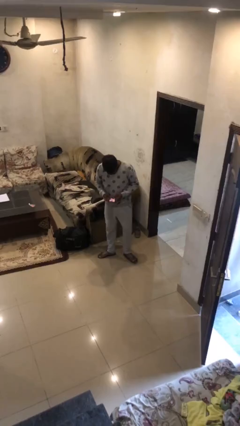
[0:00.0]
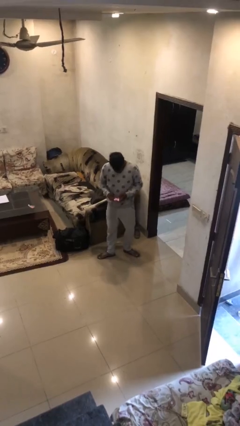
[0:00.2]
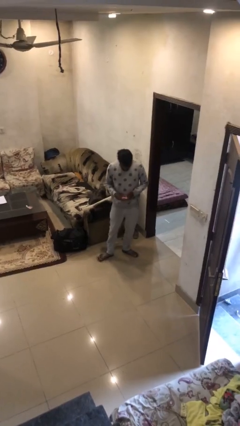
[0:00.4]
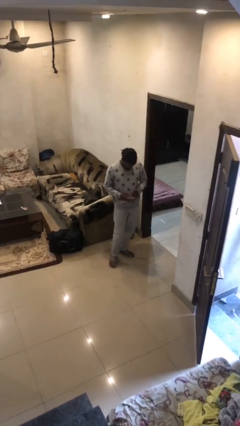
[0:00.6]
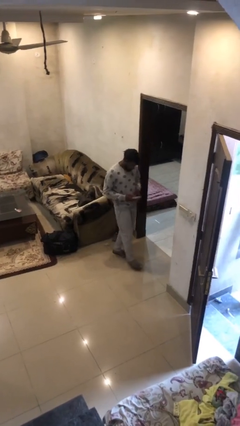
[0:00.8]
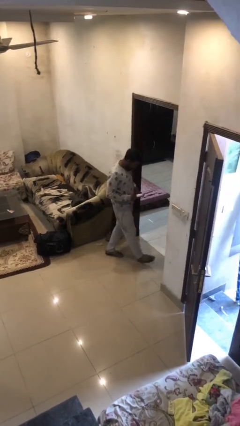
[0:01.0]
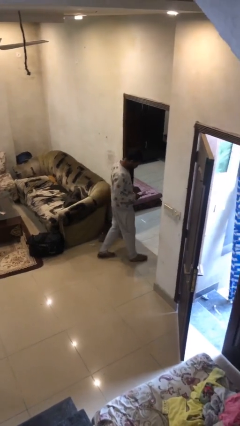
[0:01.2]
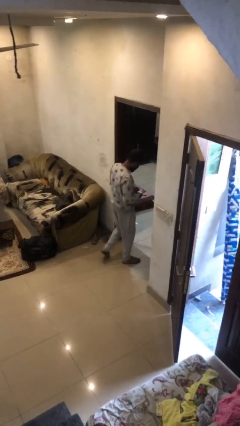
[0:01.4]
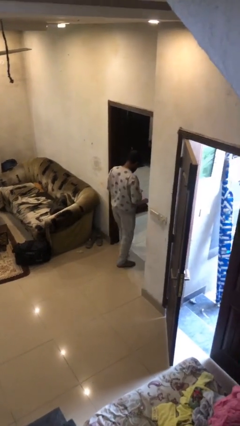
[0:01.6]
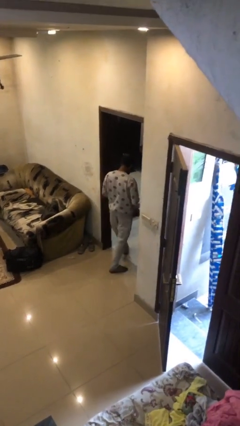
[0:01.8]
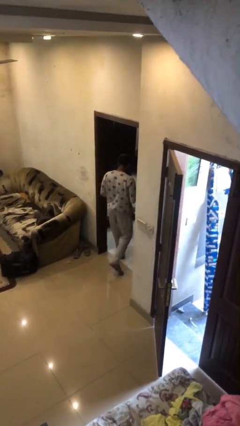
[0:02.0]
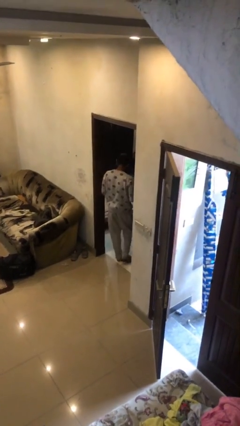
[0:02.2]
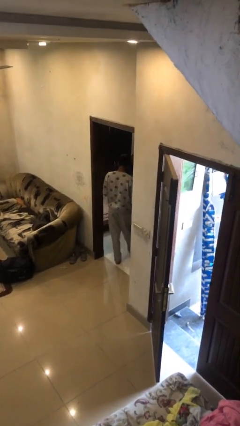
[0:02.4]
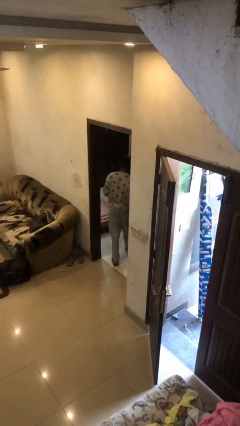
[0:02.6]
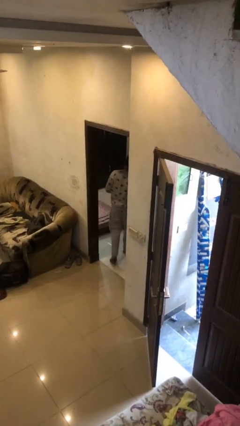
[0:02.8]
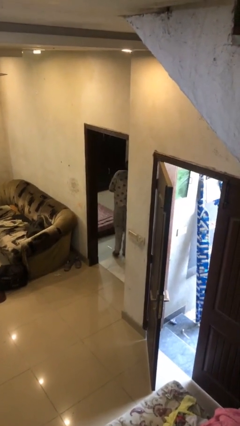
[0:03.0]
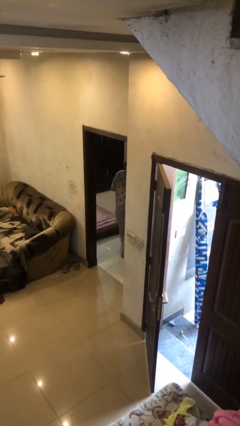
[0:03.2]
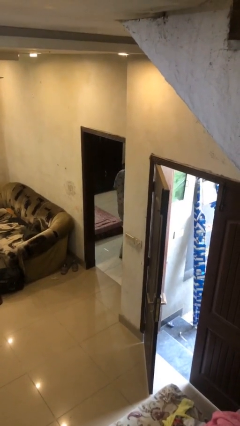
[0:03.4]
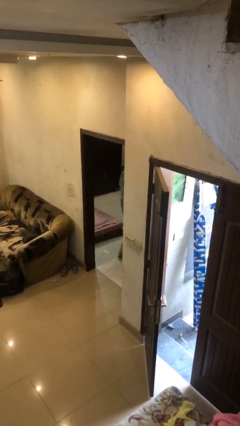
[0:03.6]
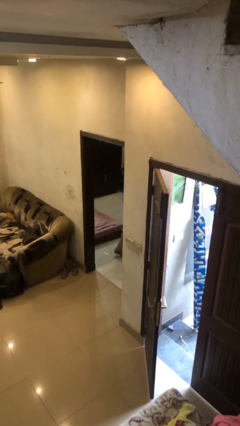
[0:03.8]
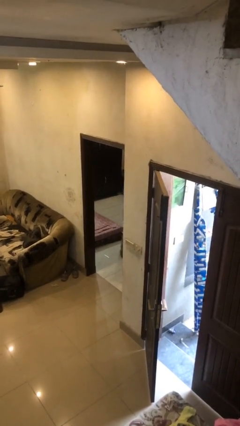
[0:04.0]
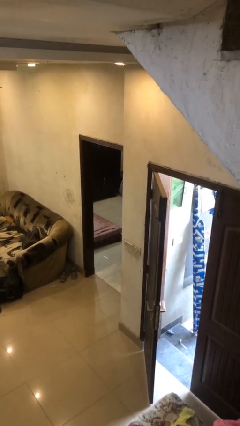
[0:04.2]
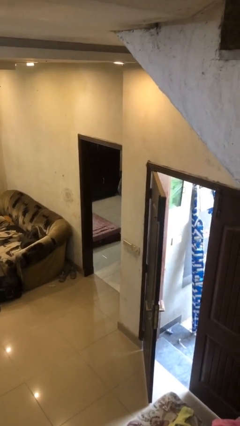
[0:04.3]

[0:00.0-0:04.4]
person exits scene through structure

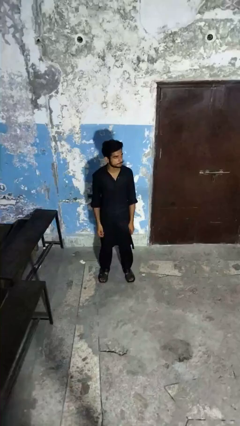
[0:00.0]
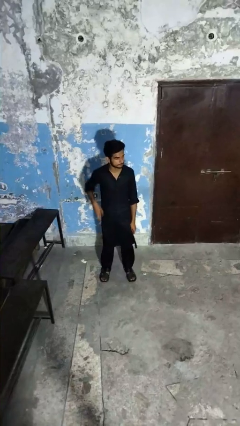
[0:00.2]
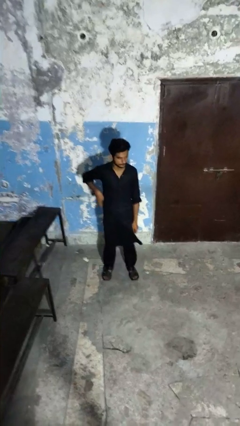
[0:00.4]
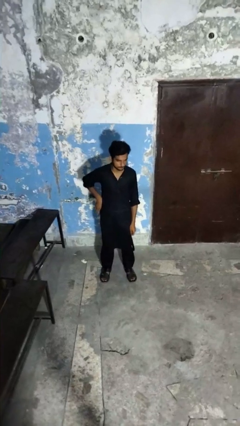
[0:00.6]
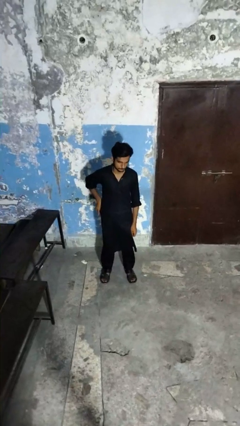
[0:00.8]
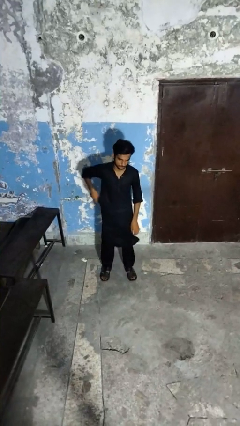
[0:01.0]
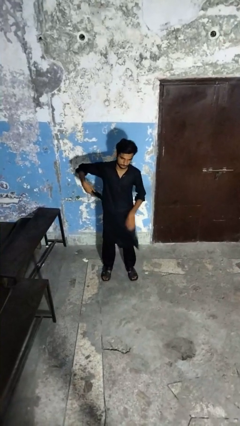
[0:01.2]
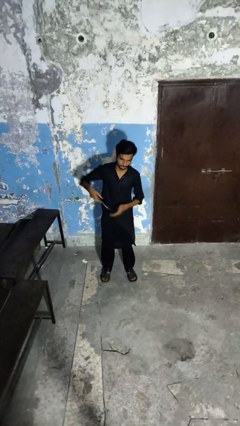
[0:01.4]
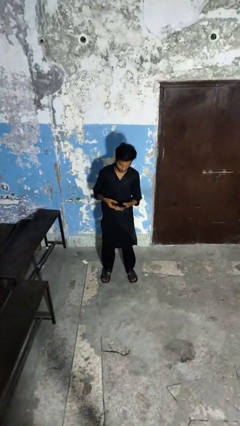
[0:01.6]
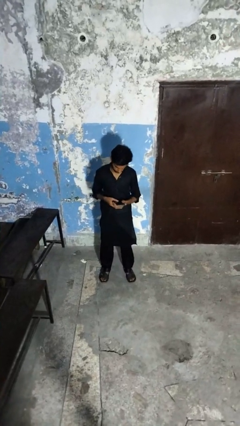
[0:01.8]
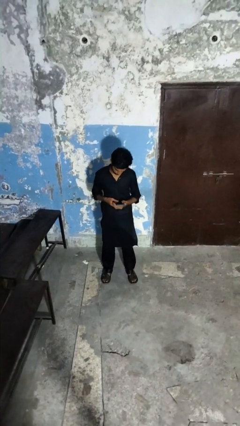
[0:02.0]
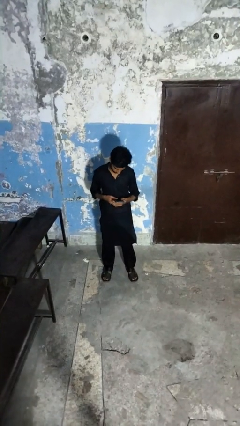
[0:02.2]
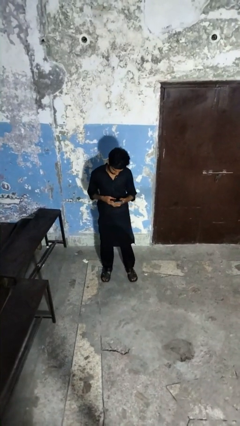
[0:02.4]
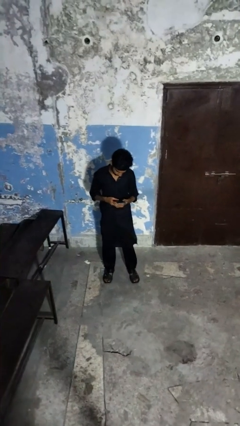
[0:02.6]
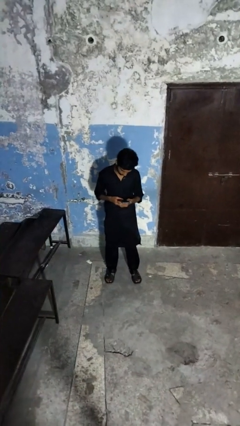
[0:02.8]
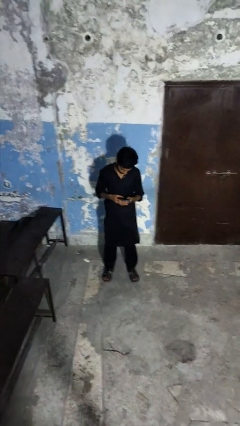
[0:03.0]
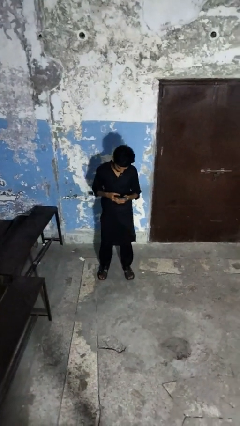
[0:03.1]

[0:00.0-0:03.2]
person takes phone from pocket

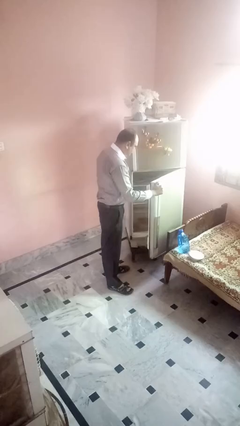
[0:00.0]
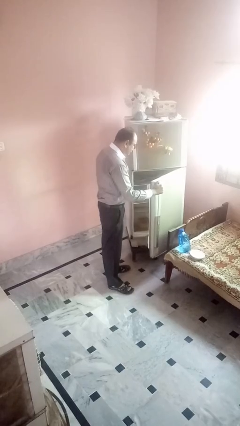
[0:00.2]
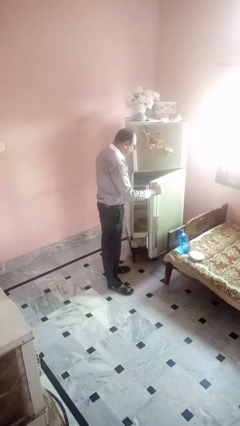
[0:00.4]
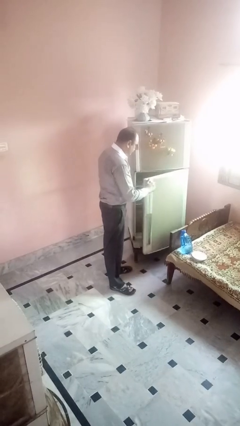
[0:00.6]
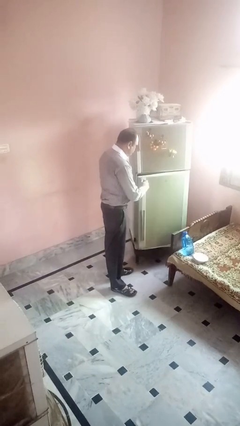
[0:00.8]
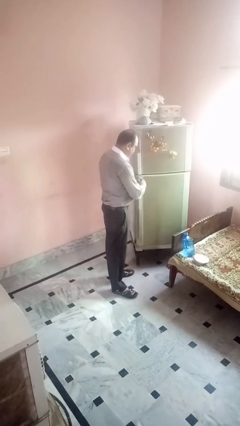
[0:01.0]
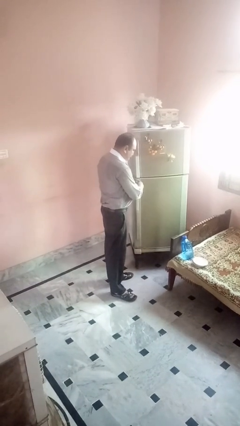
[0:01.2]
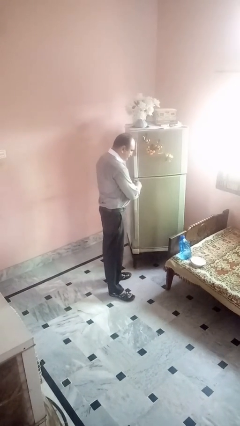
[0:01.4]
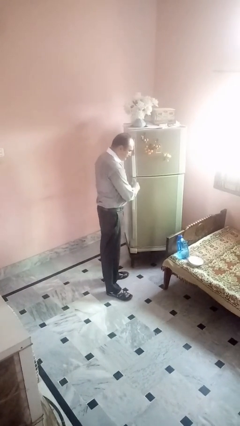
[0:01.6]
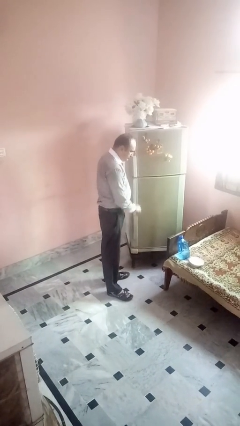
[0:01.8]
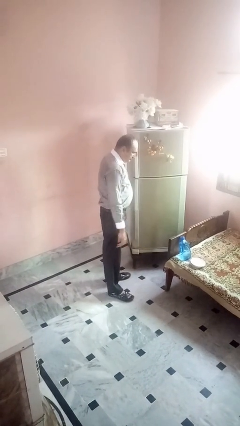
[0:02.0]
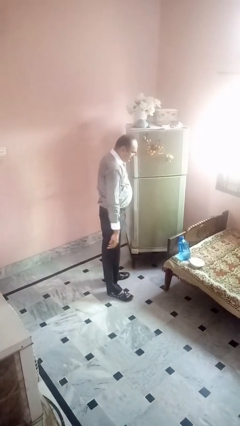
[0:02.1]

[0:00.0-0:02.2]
person closes refrigerator

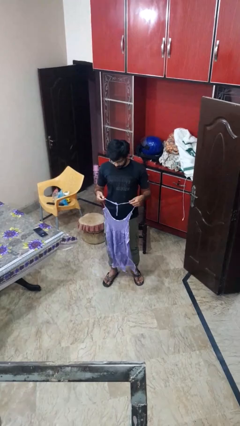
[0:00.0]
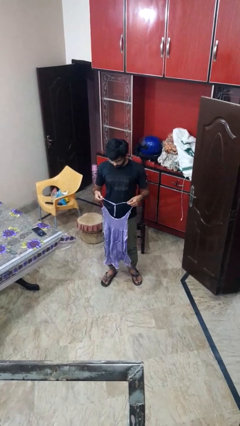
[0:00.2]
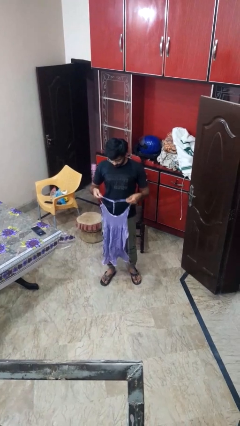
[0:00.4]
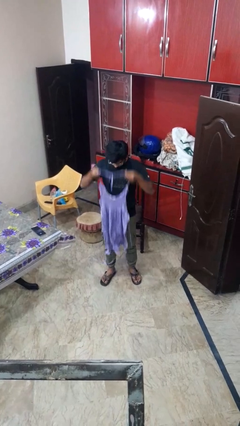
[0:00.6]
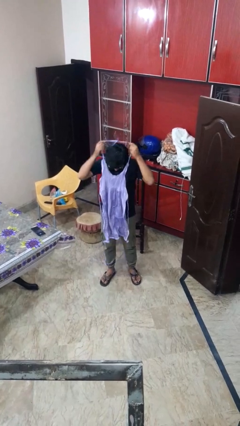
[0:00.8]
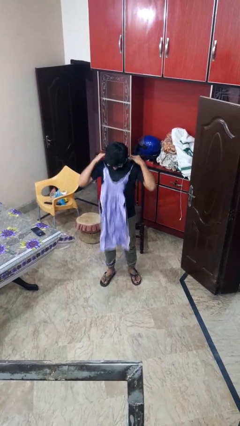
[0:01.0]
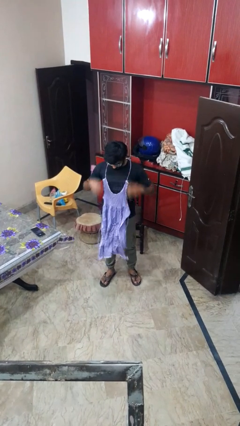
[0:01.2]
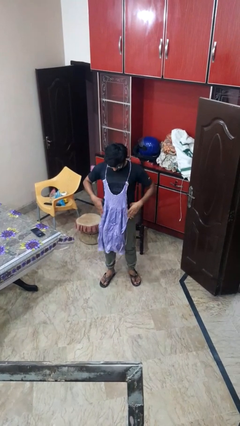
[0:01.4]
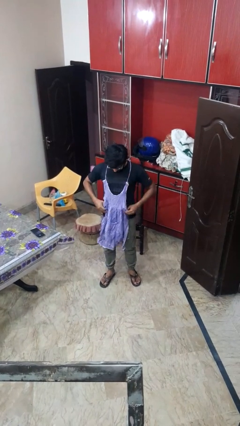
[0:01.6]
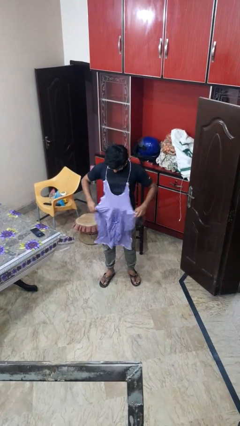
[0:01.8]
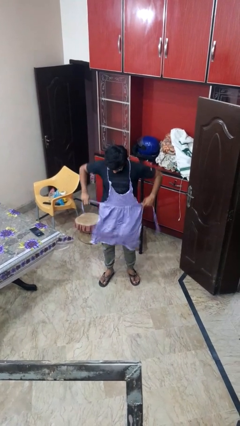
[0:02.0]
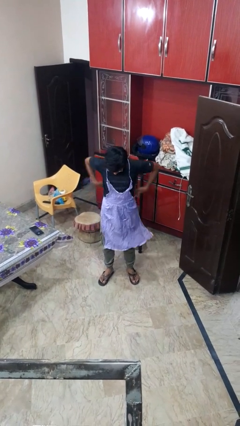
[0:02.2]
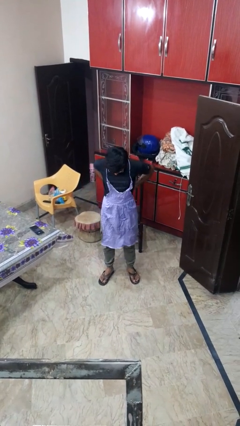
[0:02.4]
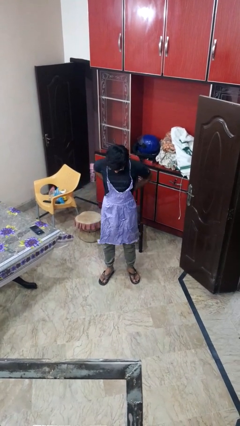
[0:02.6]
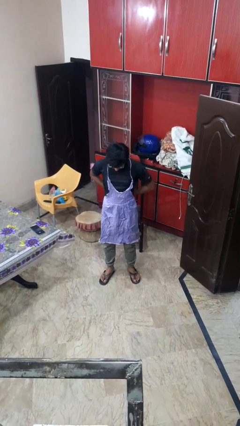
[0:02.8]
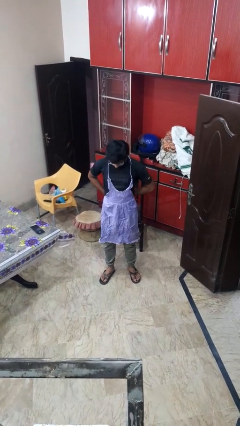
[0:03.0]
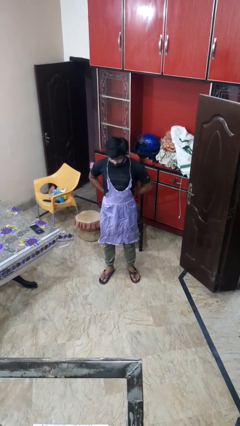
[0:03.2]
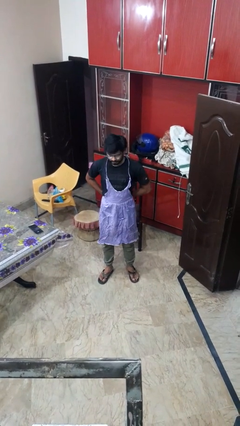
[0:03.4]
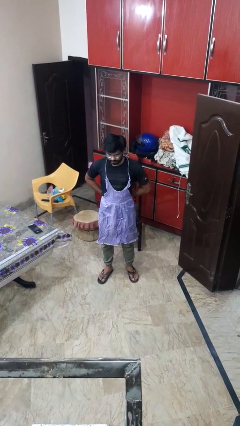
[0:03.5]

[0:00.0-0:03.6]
person puts on apron

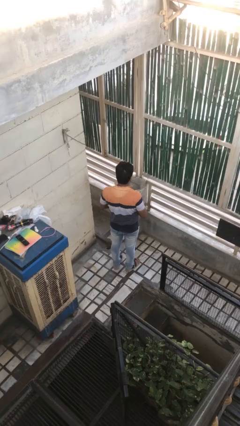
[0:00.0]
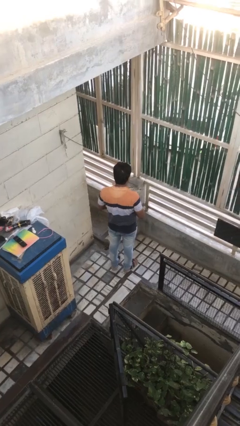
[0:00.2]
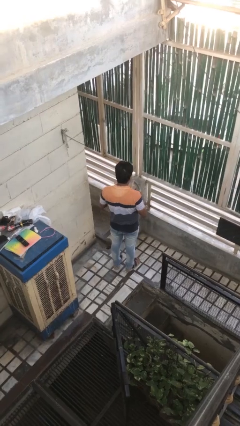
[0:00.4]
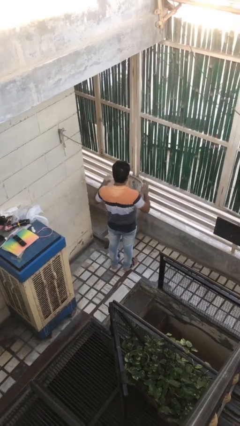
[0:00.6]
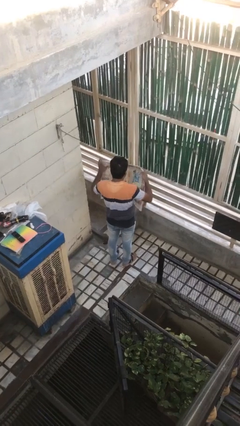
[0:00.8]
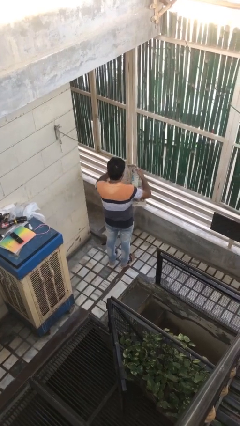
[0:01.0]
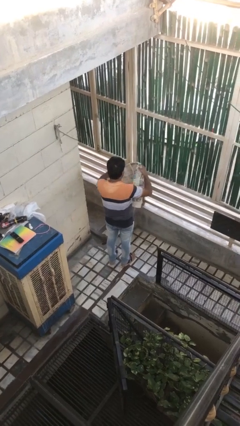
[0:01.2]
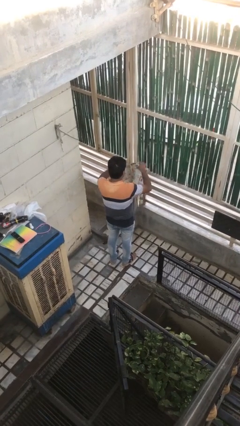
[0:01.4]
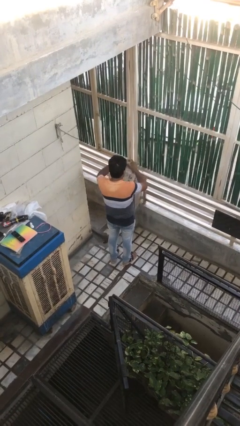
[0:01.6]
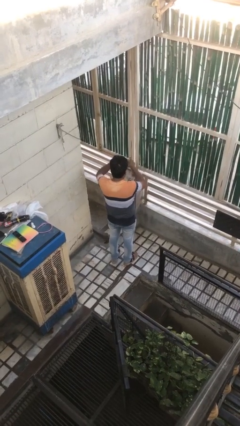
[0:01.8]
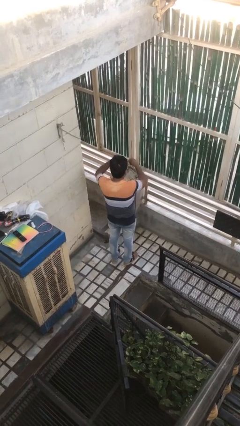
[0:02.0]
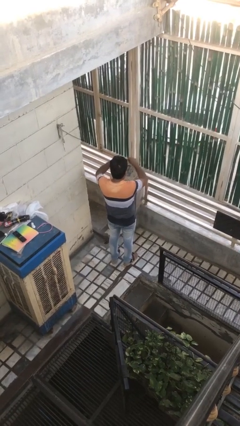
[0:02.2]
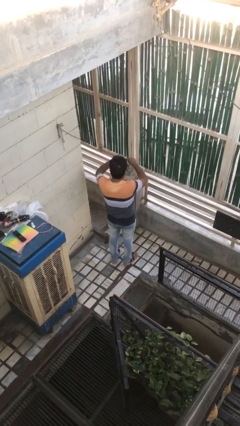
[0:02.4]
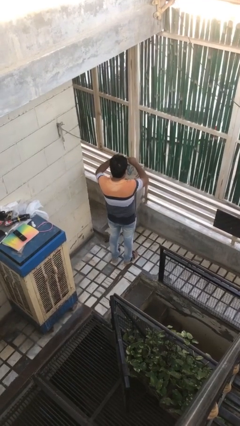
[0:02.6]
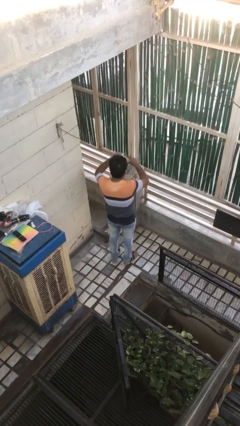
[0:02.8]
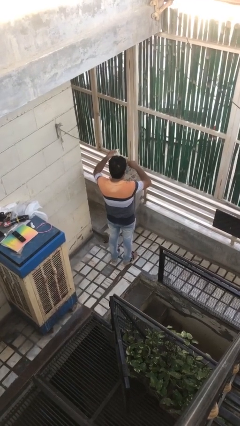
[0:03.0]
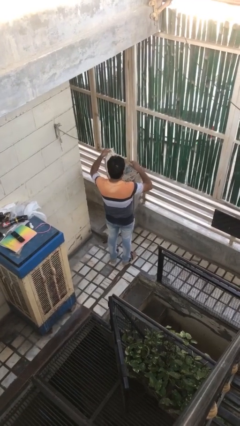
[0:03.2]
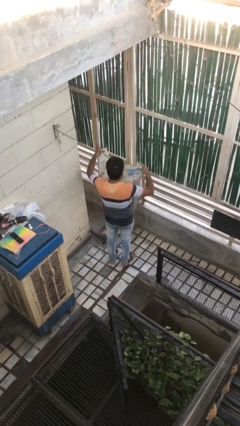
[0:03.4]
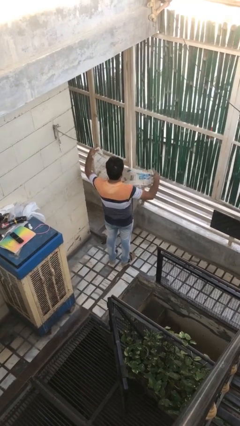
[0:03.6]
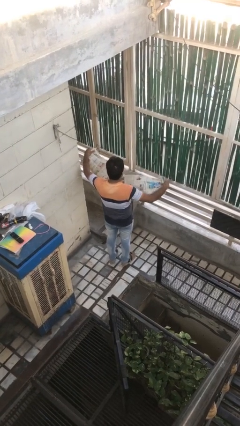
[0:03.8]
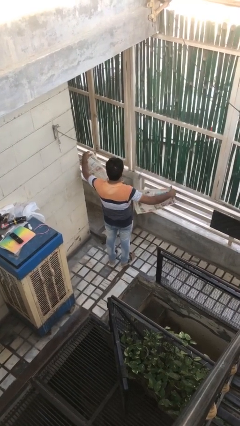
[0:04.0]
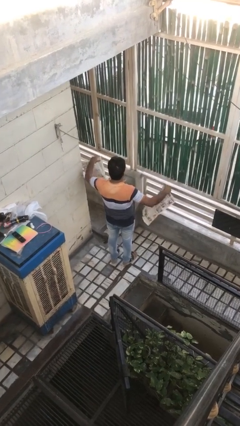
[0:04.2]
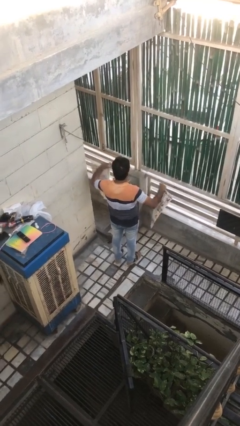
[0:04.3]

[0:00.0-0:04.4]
person tears paper
